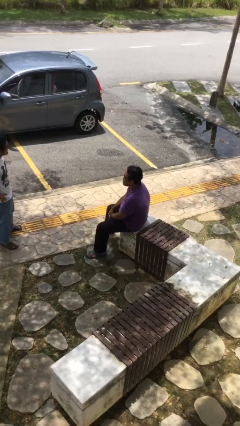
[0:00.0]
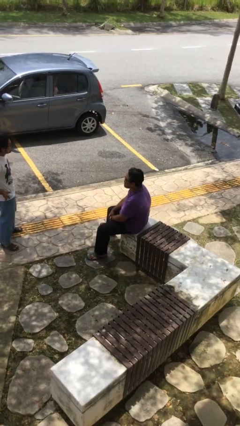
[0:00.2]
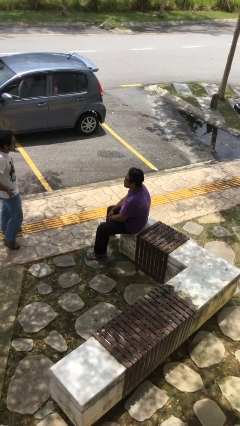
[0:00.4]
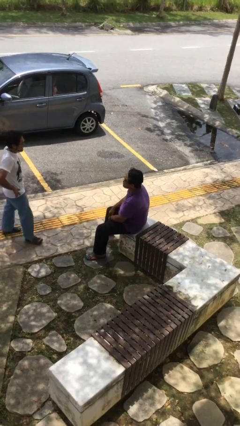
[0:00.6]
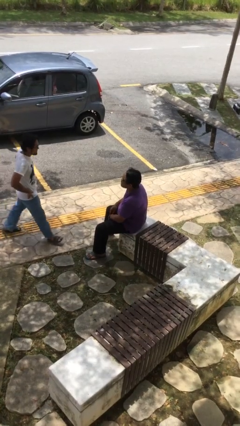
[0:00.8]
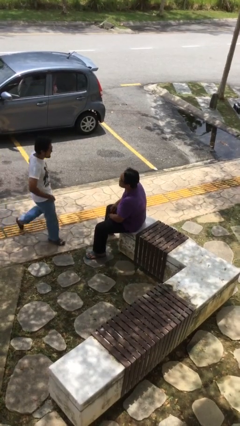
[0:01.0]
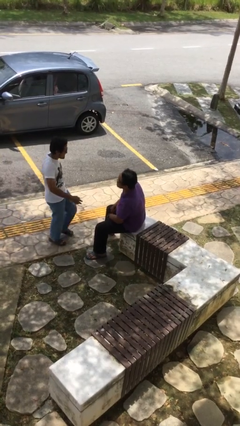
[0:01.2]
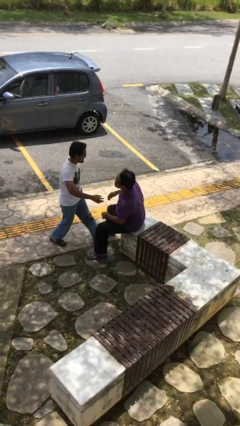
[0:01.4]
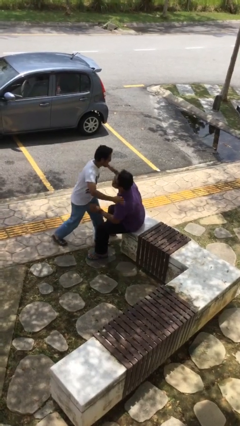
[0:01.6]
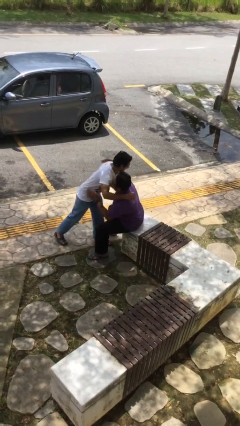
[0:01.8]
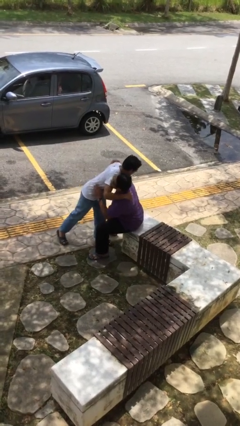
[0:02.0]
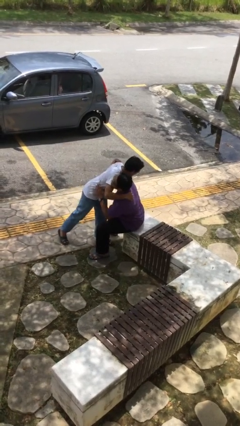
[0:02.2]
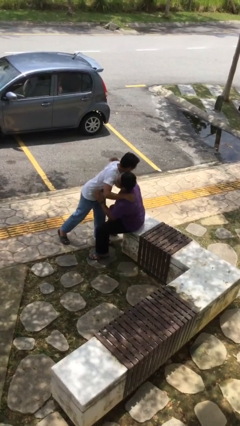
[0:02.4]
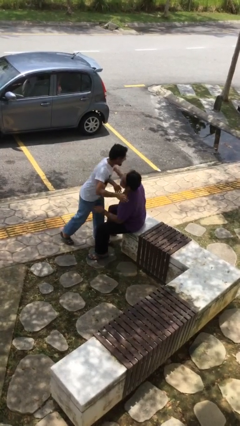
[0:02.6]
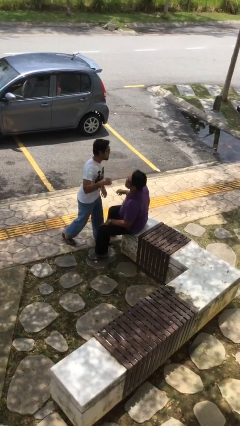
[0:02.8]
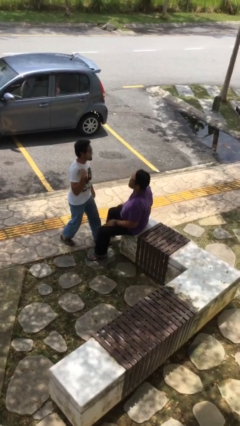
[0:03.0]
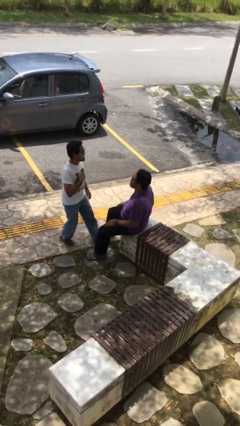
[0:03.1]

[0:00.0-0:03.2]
person embraces person

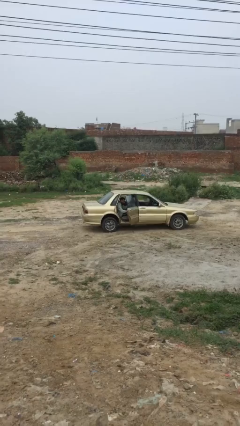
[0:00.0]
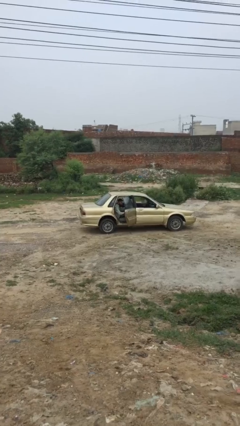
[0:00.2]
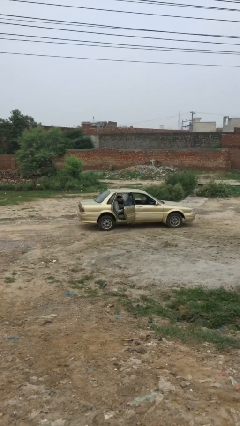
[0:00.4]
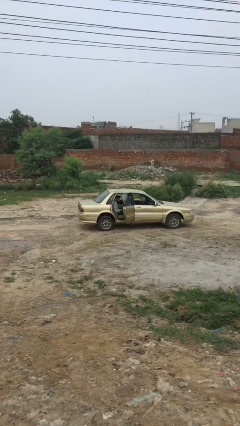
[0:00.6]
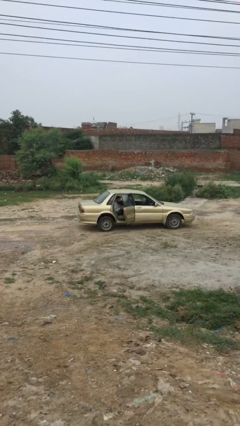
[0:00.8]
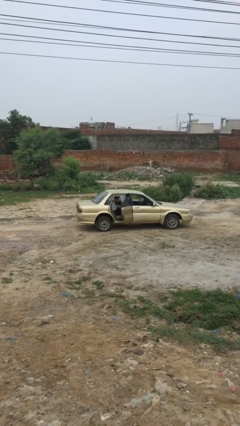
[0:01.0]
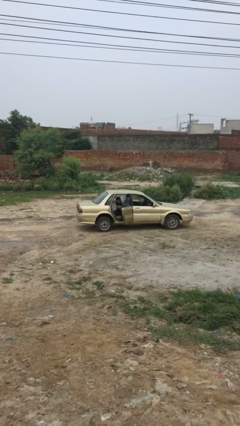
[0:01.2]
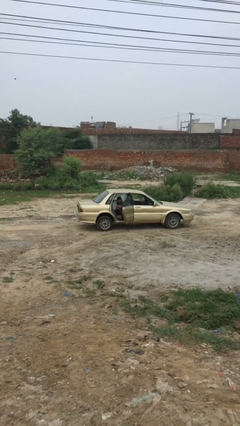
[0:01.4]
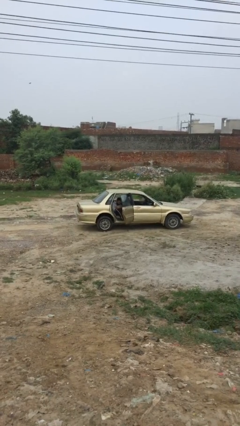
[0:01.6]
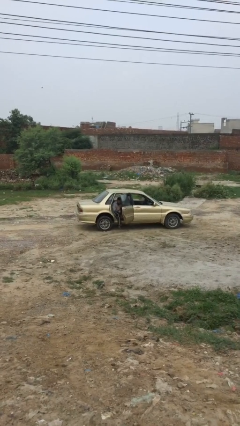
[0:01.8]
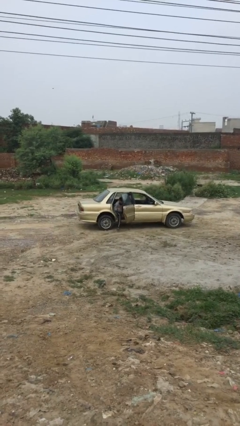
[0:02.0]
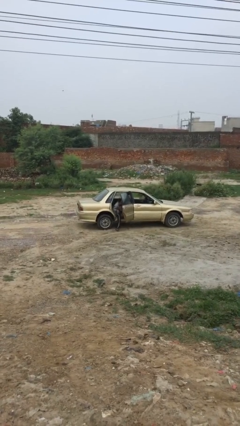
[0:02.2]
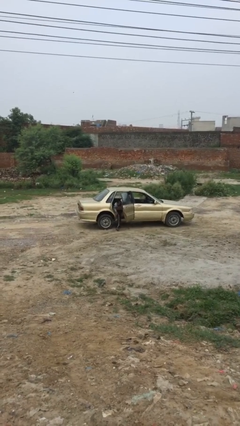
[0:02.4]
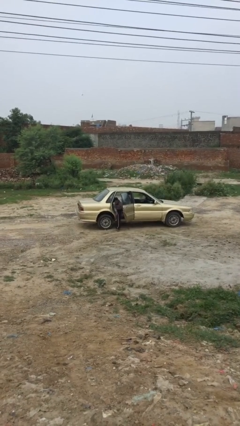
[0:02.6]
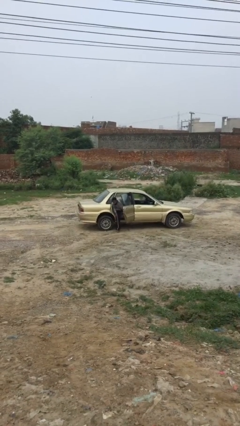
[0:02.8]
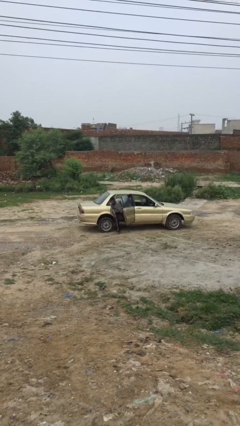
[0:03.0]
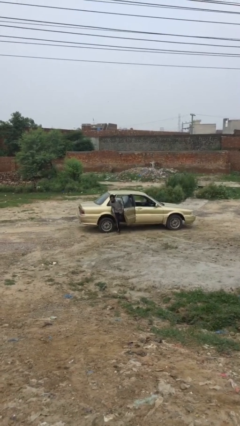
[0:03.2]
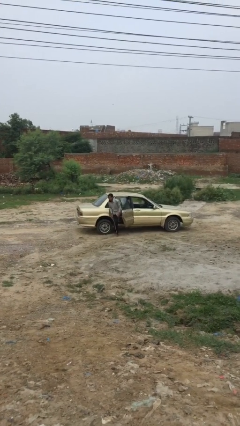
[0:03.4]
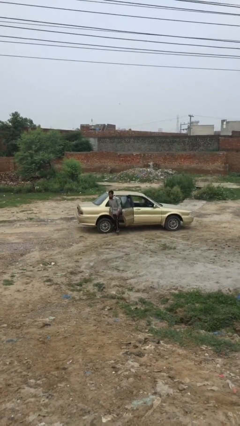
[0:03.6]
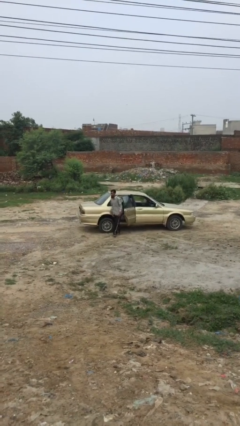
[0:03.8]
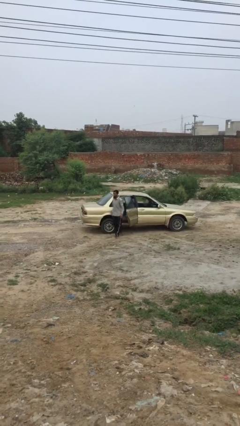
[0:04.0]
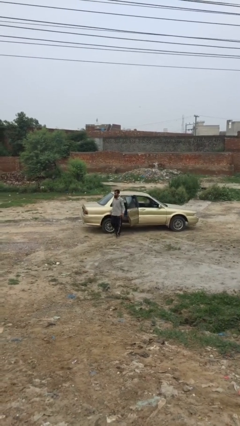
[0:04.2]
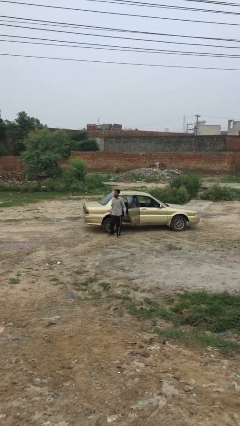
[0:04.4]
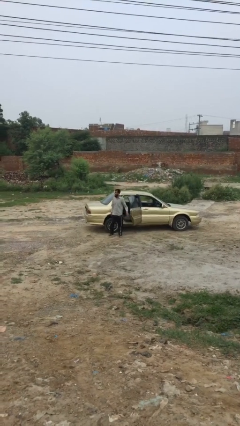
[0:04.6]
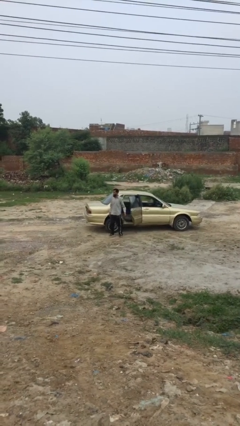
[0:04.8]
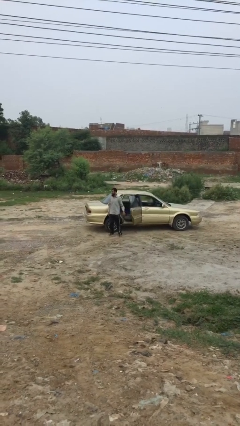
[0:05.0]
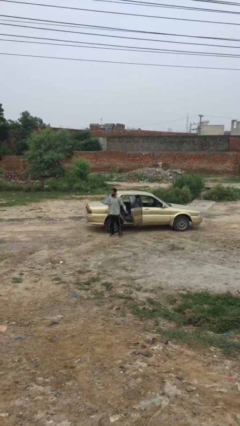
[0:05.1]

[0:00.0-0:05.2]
person exits car

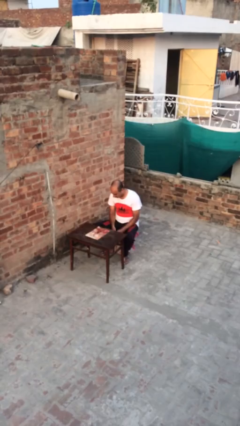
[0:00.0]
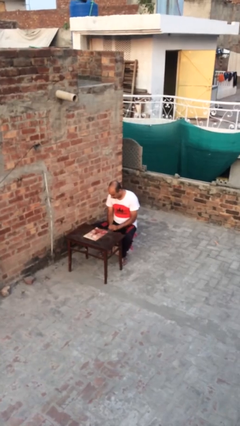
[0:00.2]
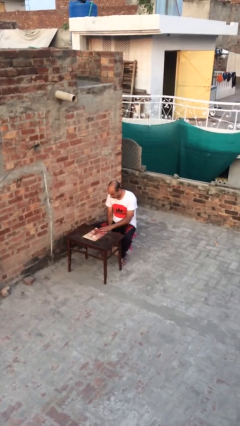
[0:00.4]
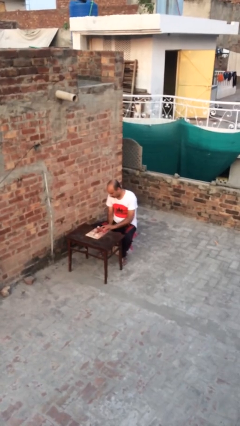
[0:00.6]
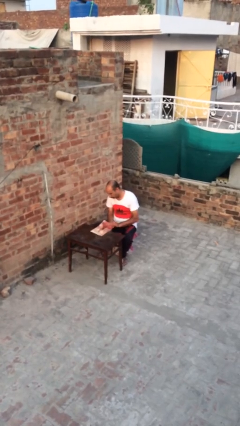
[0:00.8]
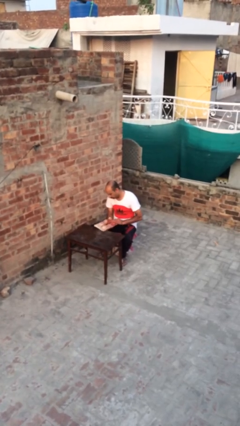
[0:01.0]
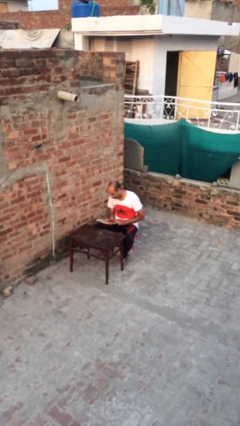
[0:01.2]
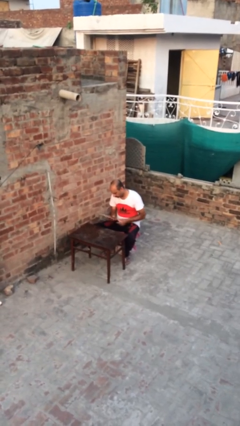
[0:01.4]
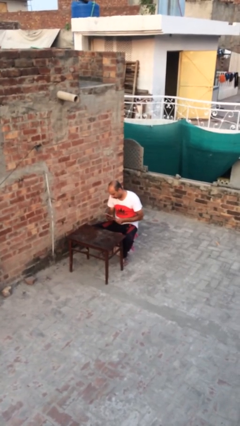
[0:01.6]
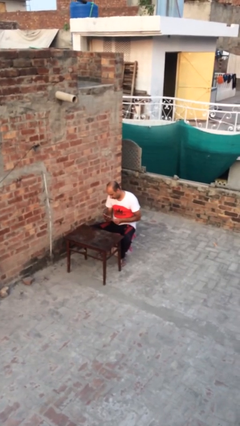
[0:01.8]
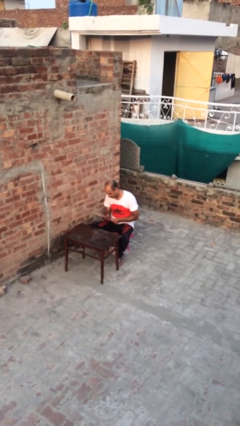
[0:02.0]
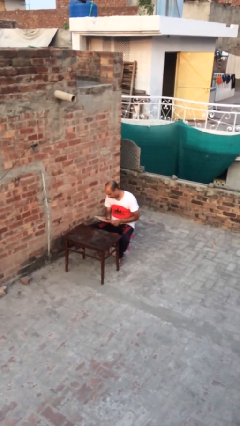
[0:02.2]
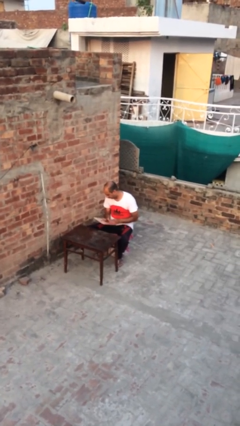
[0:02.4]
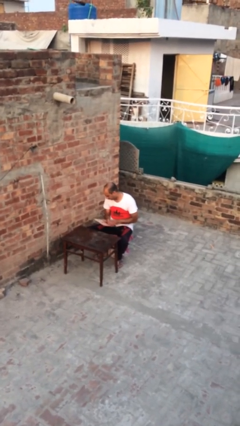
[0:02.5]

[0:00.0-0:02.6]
person picks up object from table

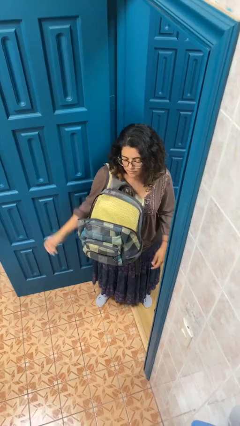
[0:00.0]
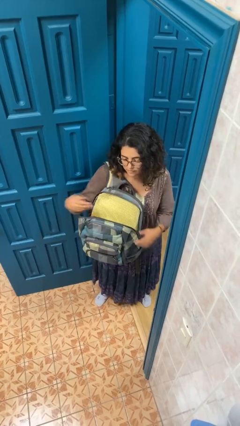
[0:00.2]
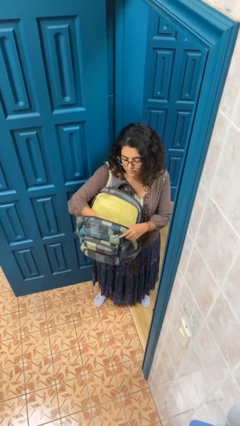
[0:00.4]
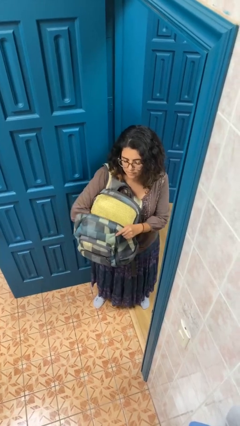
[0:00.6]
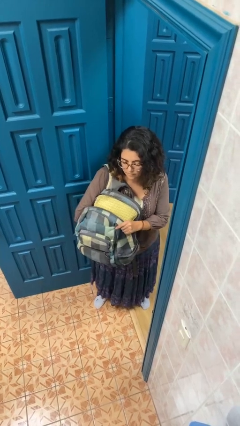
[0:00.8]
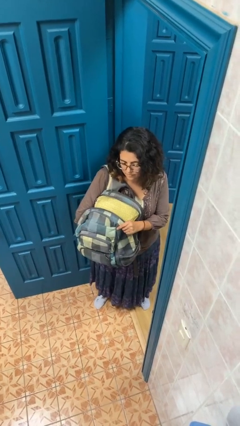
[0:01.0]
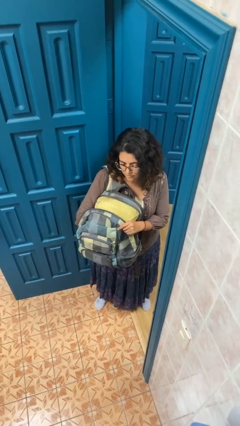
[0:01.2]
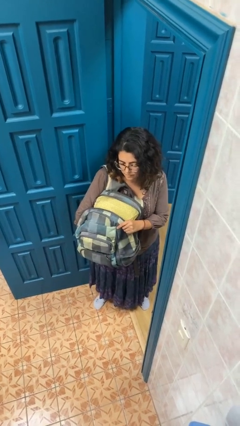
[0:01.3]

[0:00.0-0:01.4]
person searches in backpack

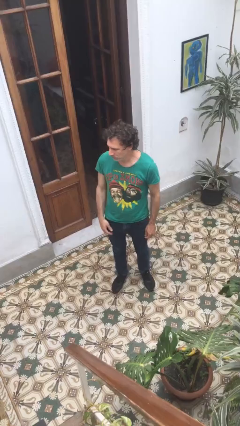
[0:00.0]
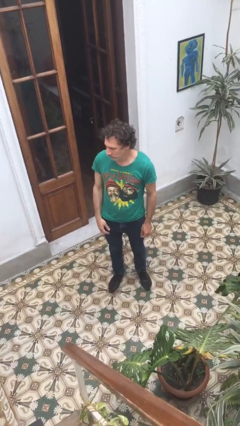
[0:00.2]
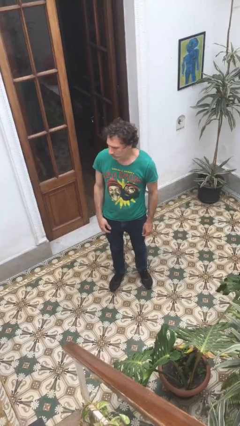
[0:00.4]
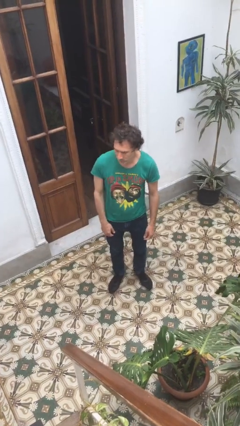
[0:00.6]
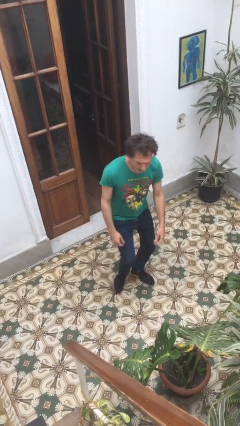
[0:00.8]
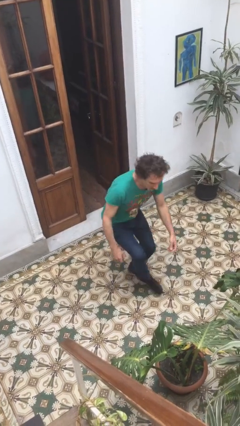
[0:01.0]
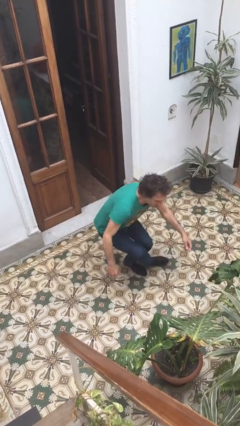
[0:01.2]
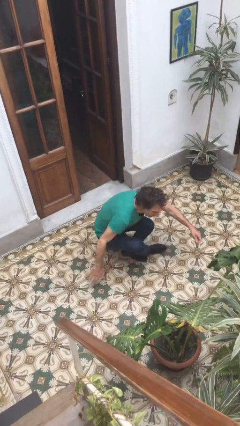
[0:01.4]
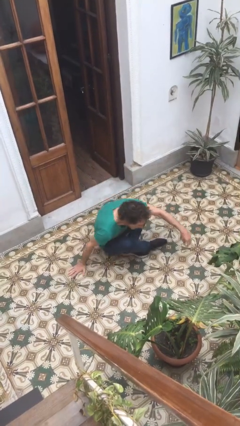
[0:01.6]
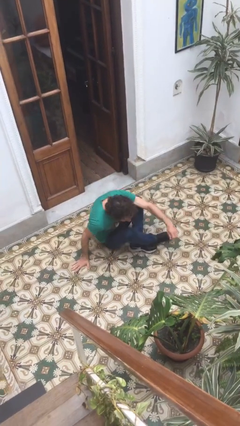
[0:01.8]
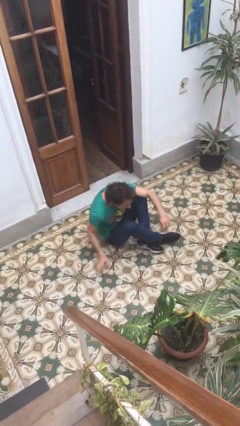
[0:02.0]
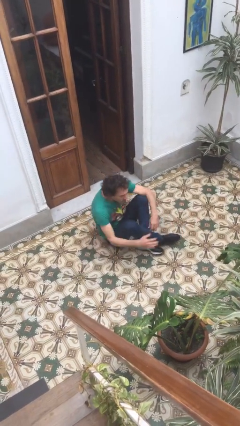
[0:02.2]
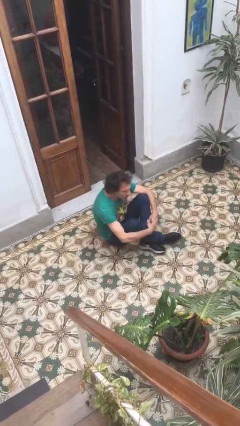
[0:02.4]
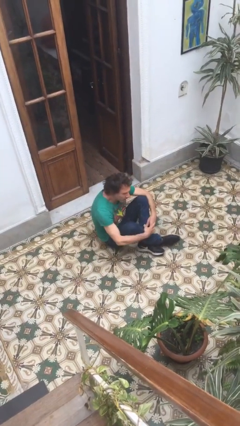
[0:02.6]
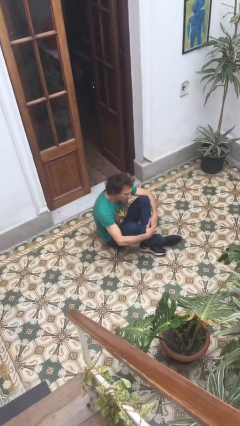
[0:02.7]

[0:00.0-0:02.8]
person sits down

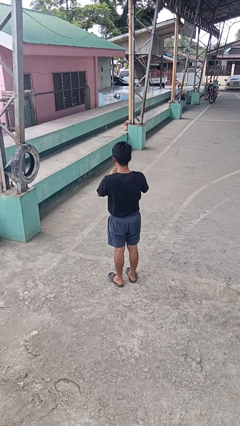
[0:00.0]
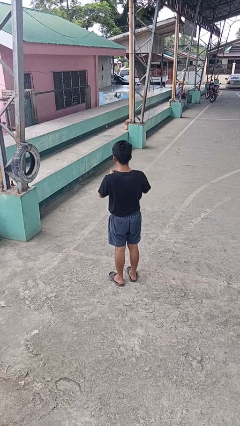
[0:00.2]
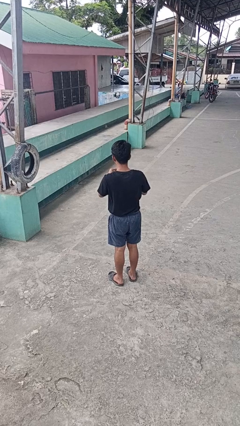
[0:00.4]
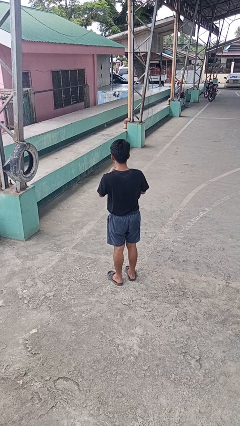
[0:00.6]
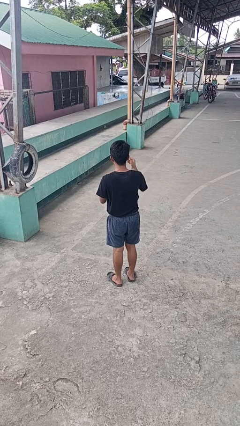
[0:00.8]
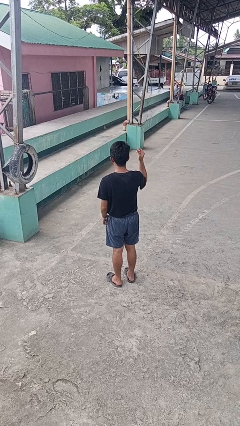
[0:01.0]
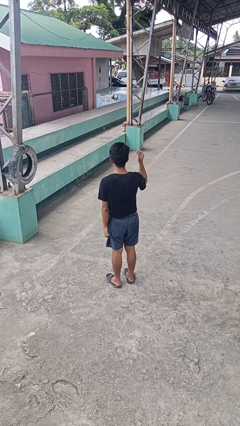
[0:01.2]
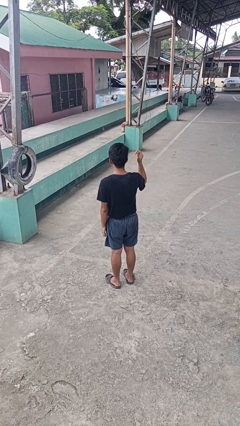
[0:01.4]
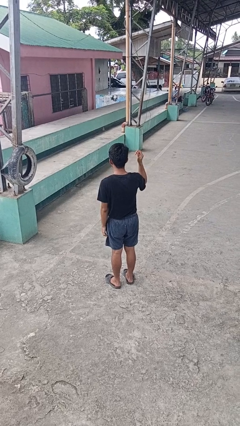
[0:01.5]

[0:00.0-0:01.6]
person takes off ring

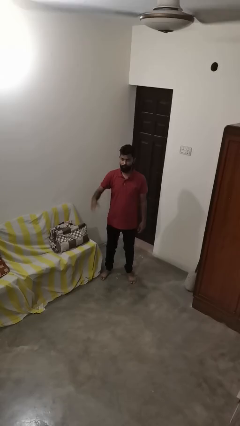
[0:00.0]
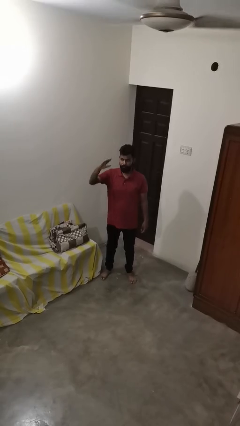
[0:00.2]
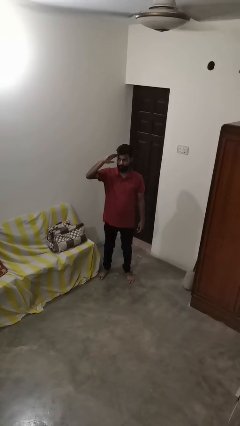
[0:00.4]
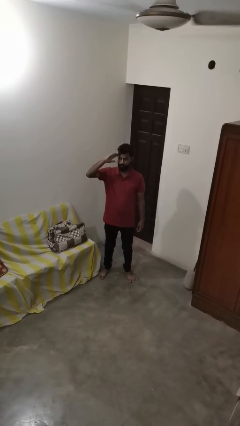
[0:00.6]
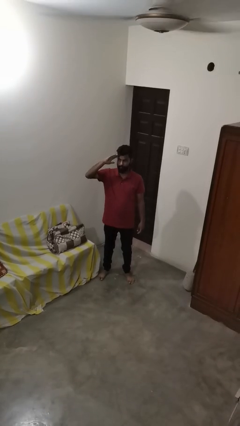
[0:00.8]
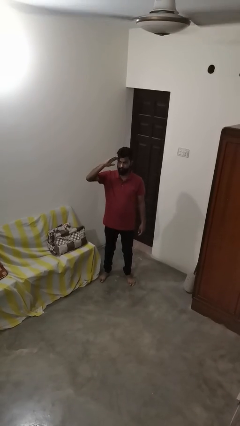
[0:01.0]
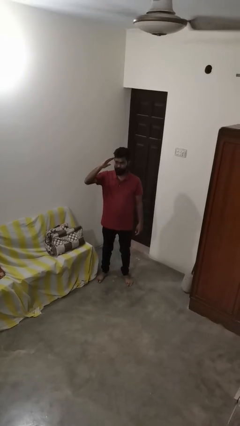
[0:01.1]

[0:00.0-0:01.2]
person salutes
